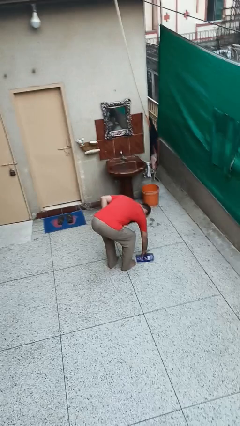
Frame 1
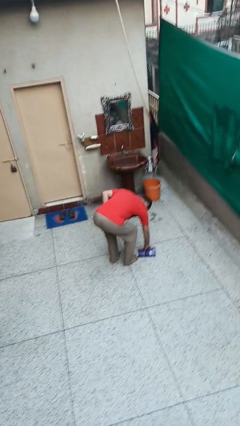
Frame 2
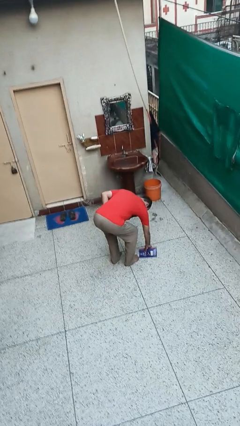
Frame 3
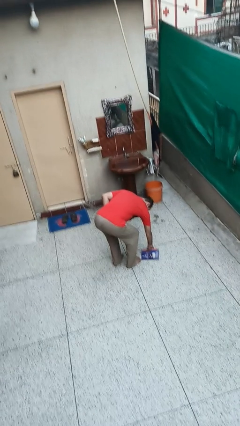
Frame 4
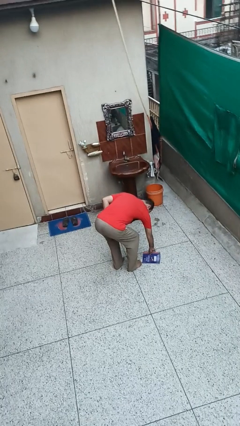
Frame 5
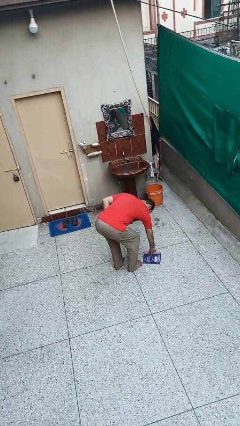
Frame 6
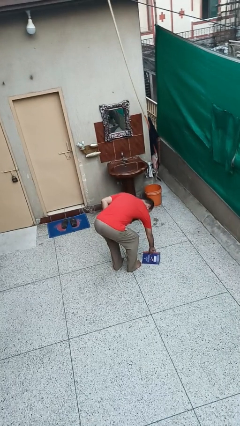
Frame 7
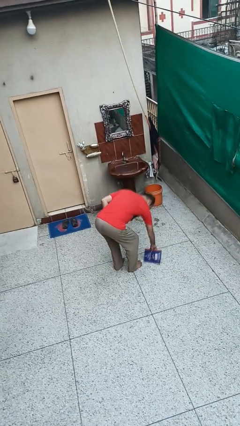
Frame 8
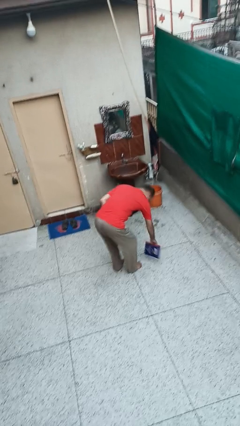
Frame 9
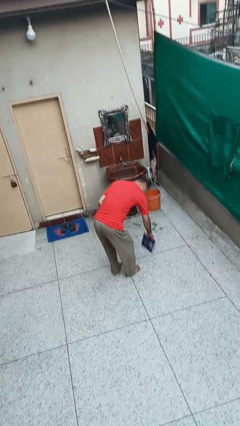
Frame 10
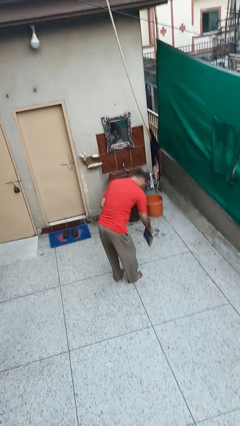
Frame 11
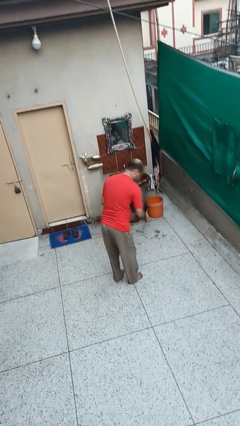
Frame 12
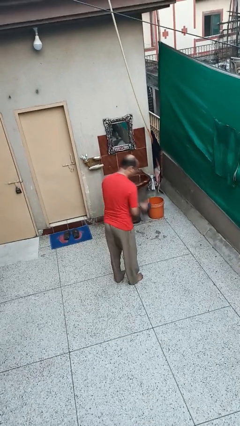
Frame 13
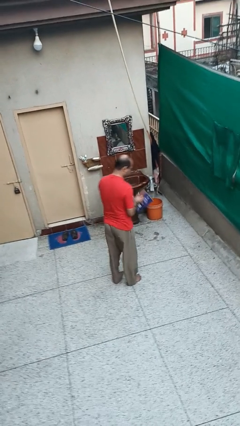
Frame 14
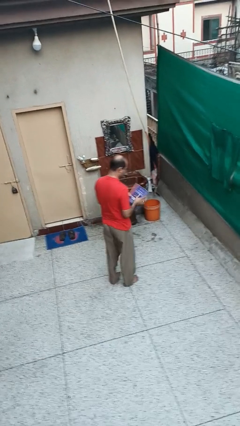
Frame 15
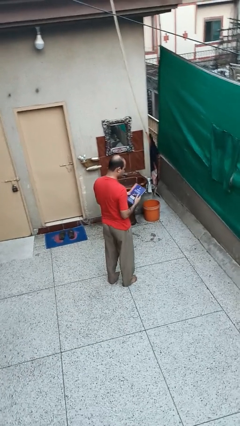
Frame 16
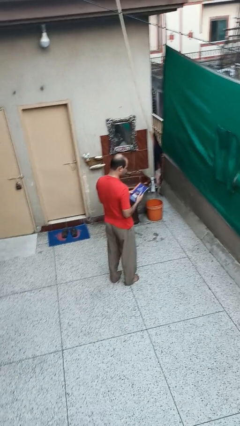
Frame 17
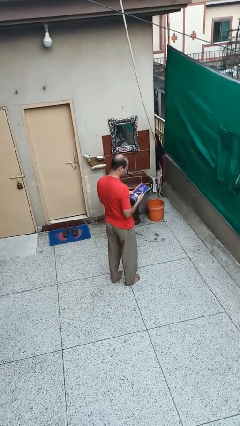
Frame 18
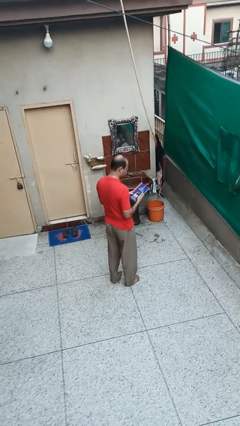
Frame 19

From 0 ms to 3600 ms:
person stands up from floor

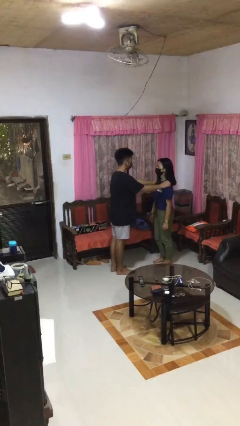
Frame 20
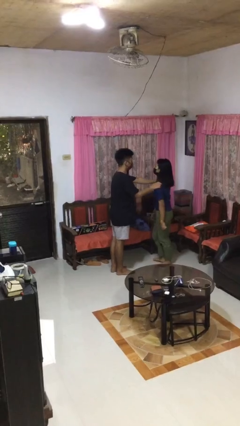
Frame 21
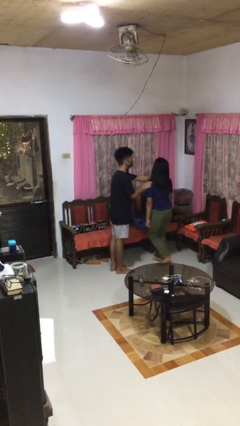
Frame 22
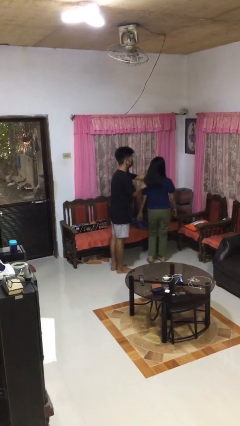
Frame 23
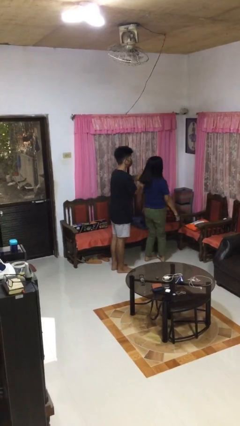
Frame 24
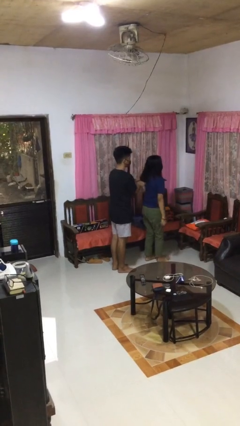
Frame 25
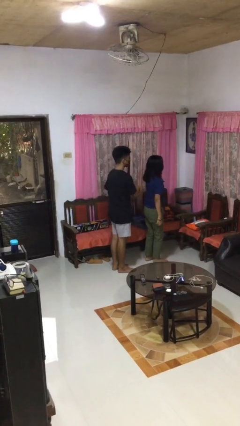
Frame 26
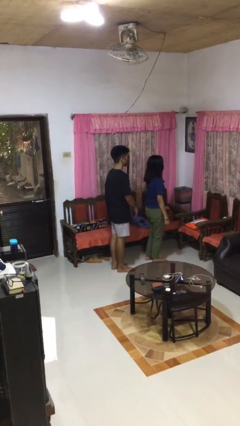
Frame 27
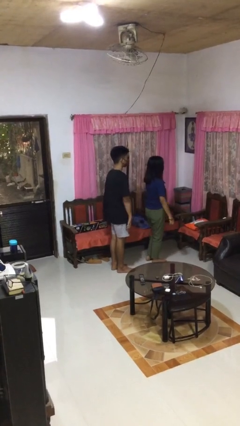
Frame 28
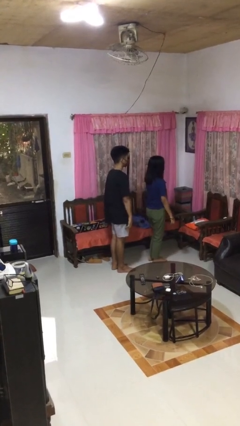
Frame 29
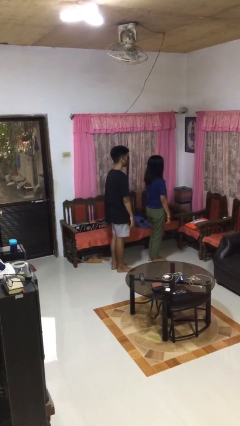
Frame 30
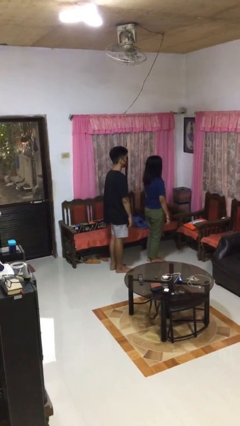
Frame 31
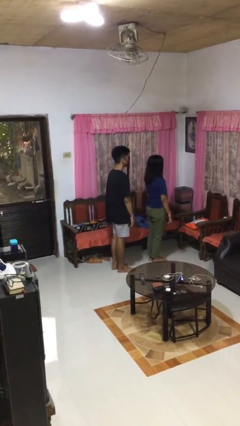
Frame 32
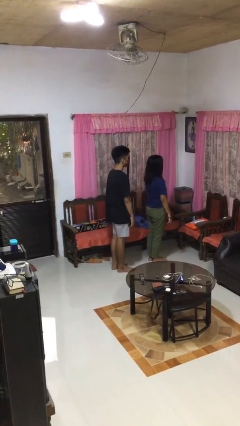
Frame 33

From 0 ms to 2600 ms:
person spins person around

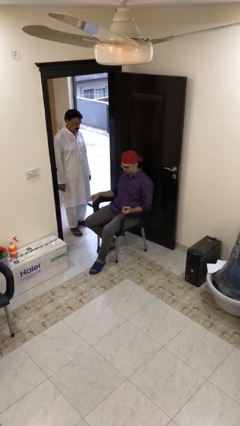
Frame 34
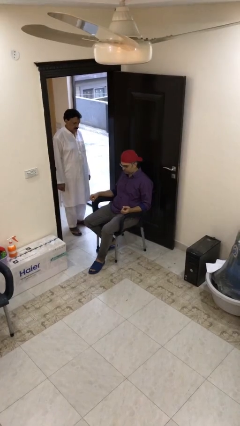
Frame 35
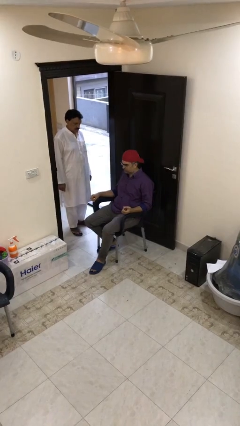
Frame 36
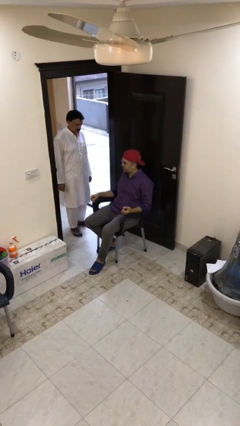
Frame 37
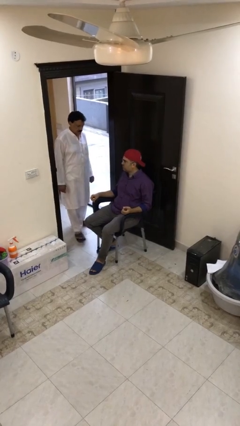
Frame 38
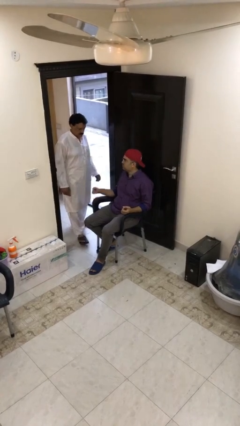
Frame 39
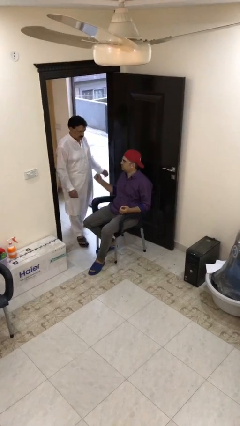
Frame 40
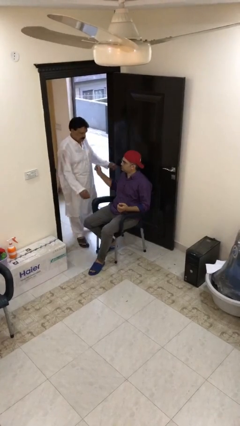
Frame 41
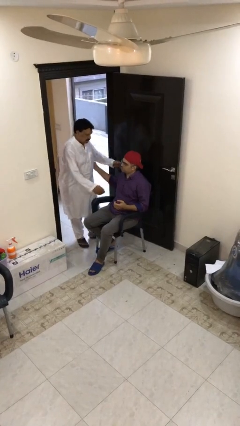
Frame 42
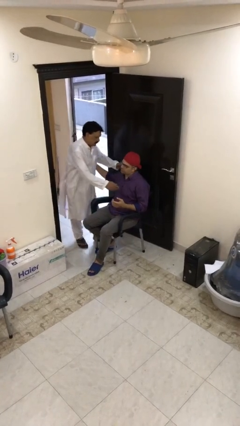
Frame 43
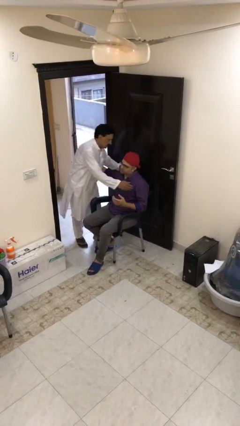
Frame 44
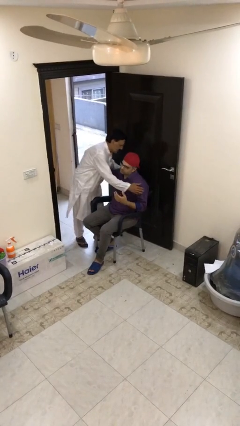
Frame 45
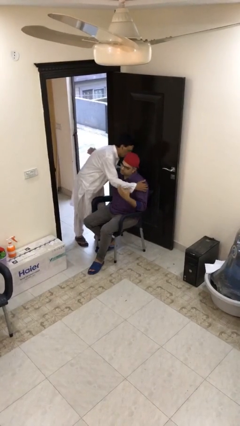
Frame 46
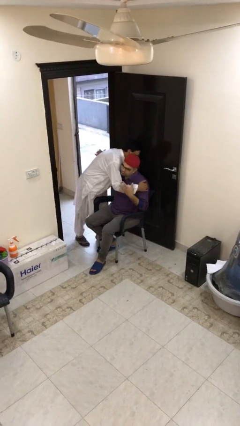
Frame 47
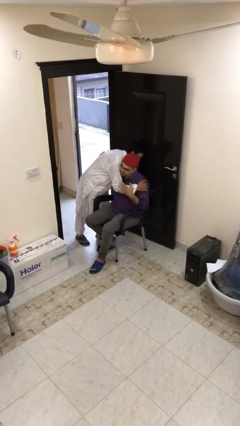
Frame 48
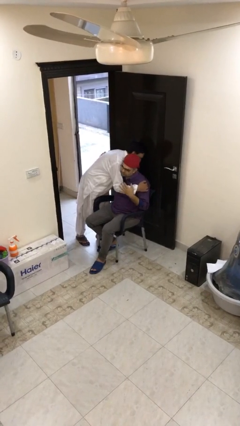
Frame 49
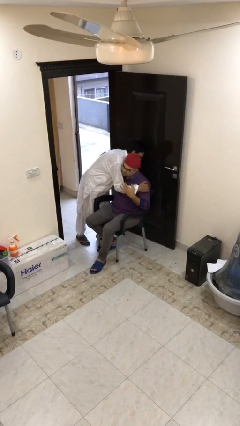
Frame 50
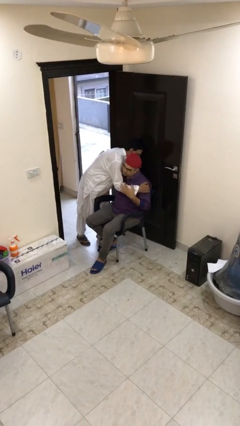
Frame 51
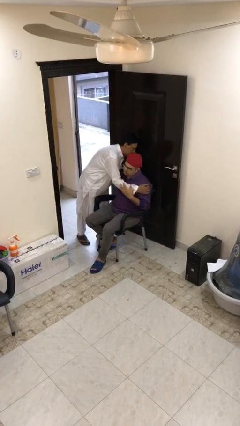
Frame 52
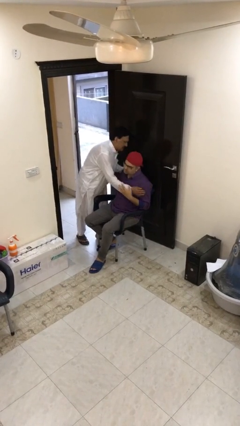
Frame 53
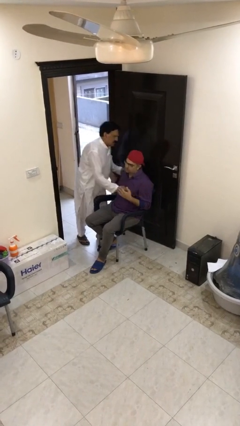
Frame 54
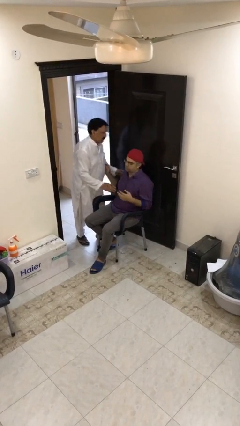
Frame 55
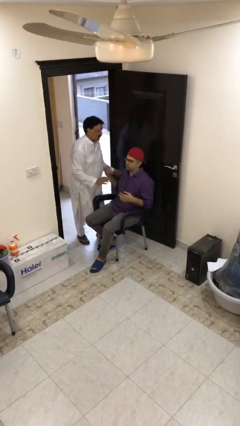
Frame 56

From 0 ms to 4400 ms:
person embraces person

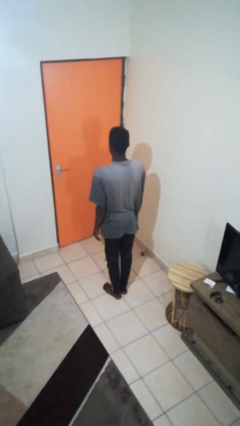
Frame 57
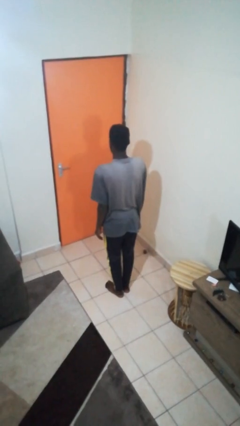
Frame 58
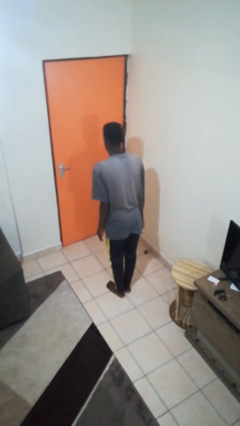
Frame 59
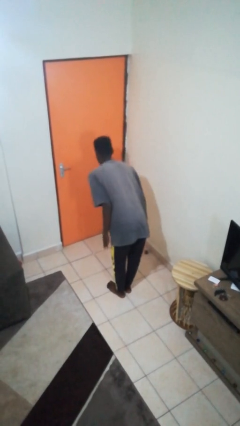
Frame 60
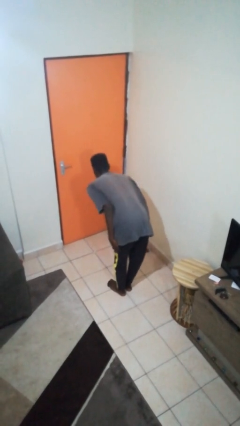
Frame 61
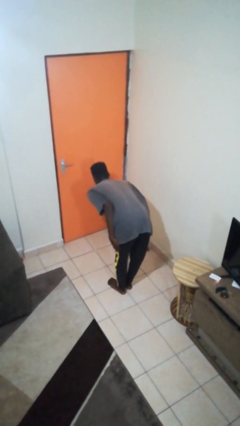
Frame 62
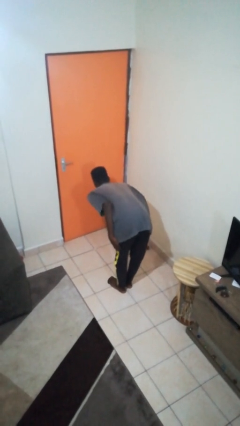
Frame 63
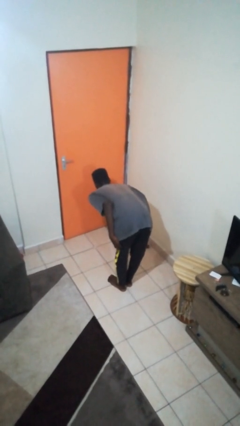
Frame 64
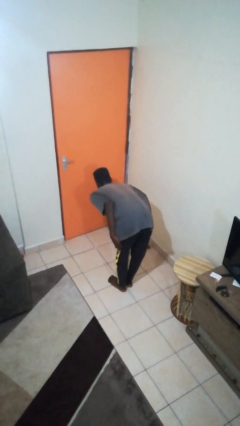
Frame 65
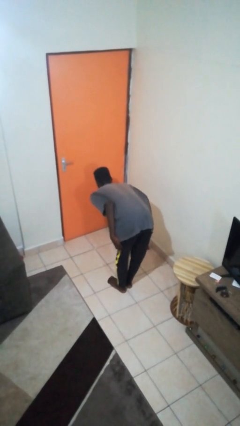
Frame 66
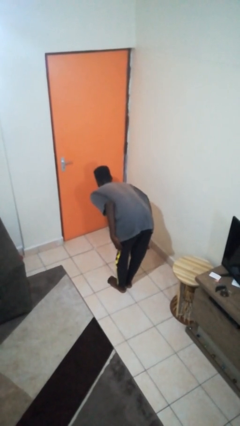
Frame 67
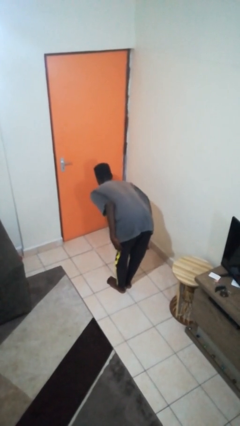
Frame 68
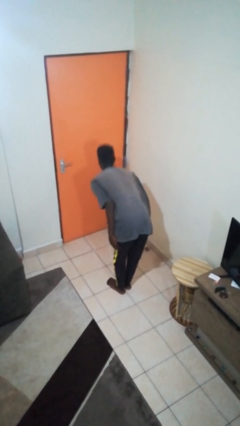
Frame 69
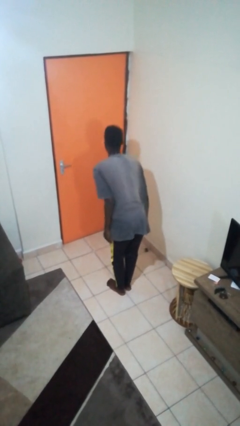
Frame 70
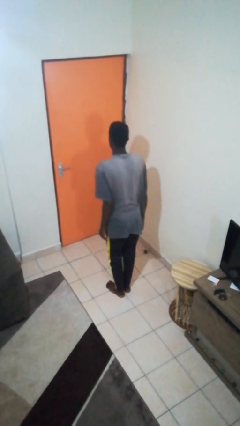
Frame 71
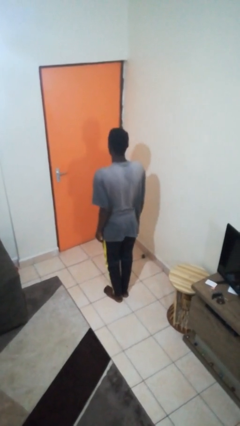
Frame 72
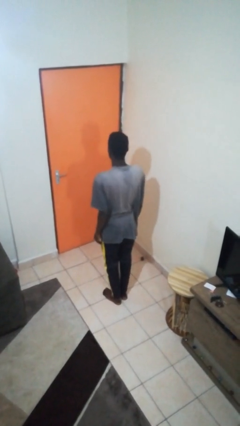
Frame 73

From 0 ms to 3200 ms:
person bows

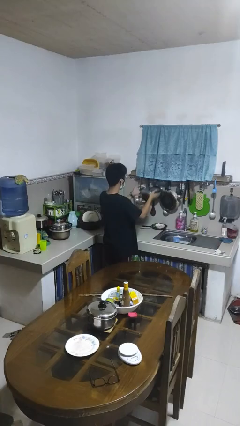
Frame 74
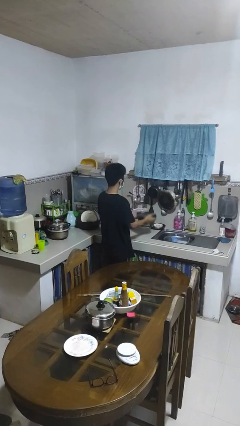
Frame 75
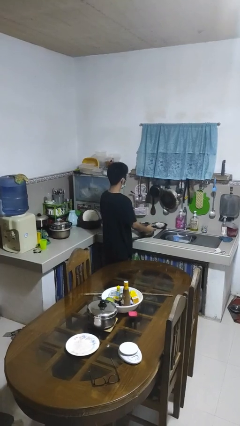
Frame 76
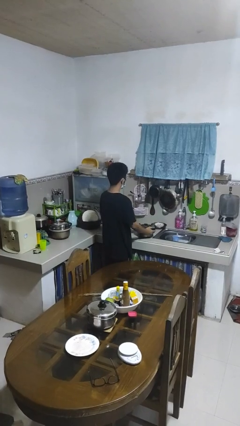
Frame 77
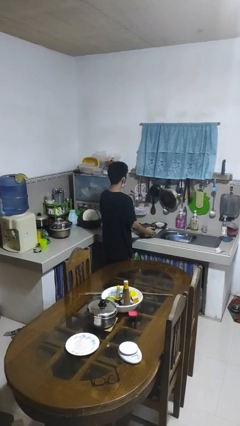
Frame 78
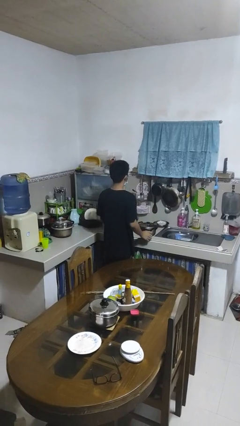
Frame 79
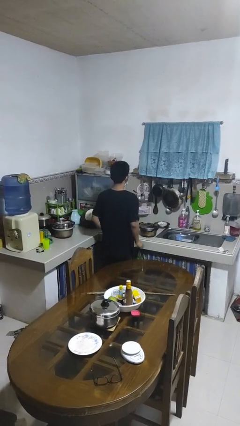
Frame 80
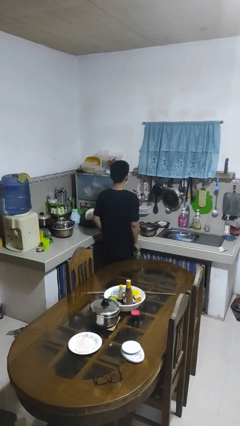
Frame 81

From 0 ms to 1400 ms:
person puts down object on countertop

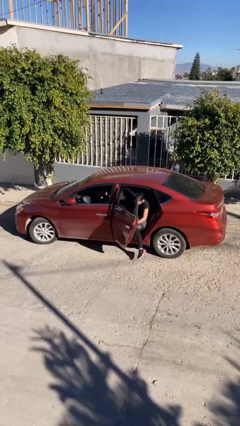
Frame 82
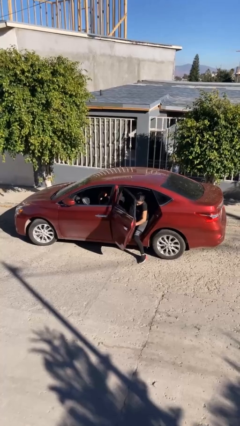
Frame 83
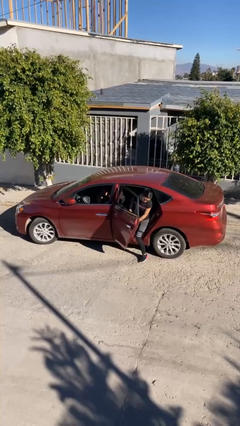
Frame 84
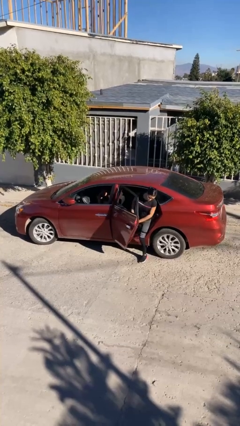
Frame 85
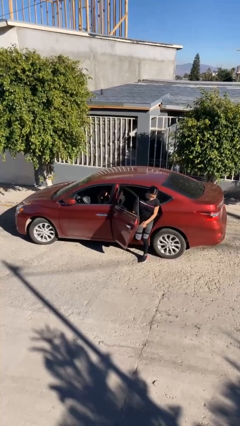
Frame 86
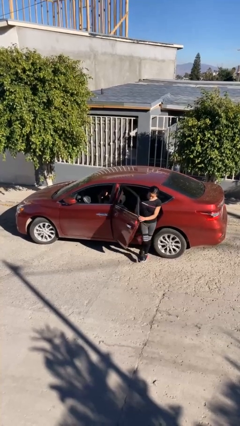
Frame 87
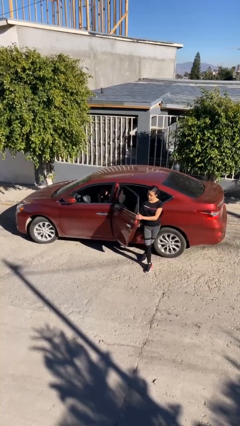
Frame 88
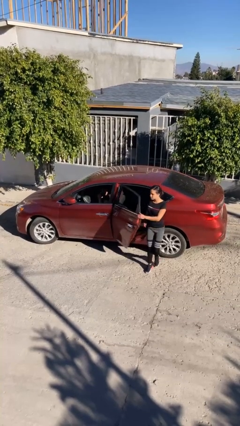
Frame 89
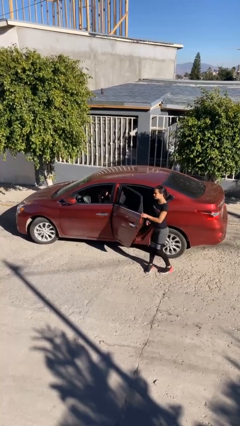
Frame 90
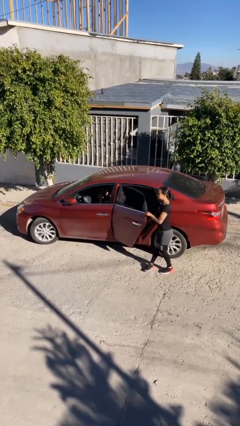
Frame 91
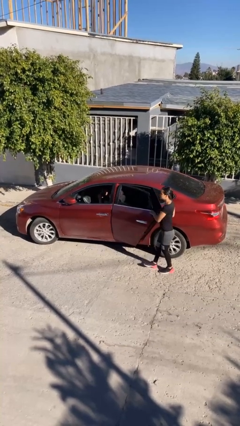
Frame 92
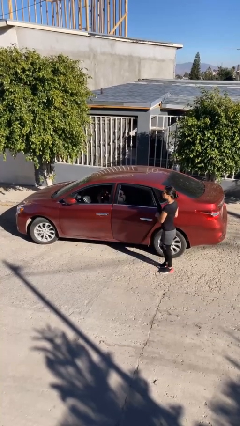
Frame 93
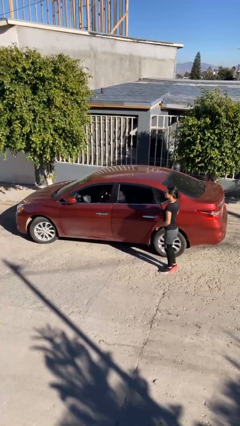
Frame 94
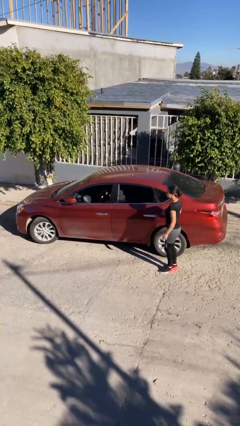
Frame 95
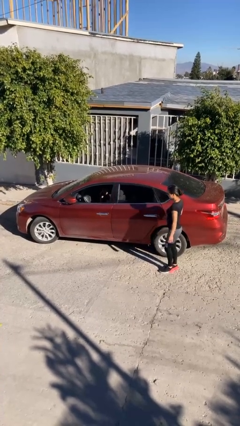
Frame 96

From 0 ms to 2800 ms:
car drops off person
